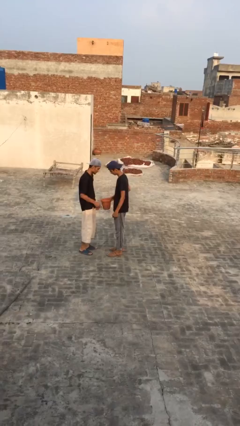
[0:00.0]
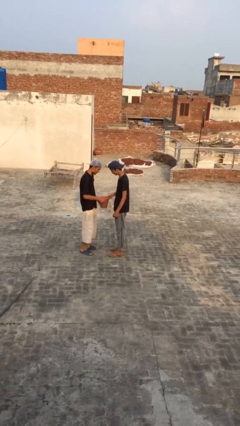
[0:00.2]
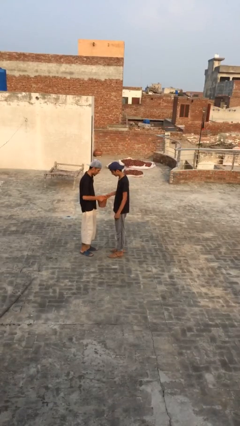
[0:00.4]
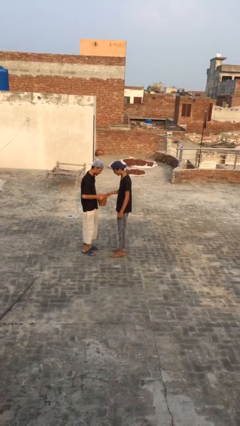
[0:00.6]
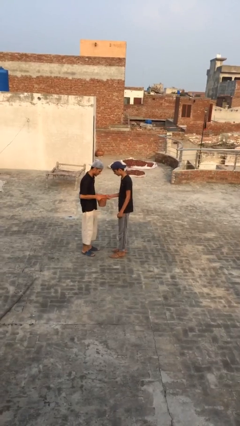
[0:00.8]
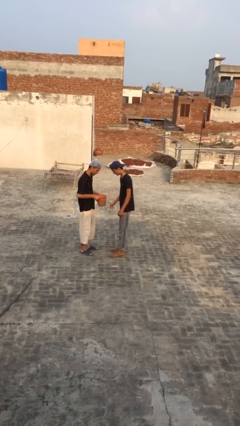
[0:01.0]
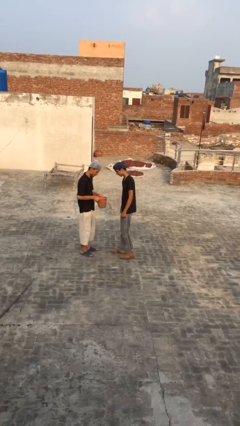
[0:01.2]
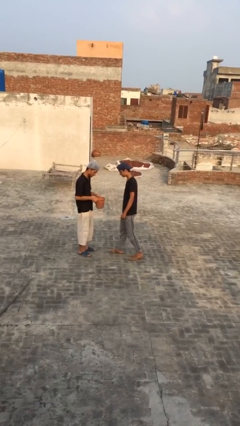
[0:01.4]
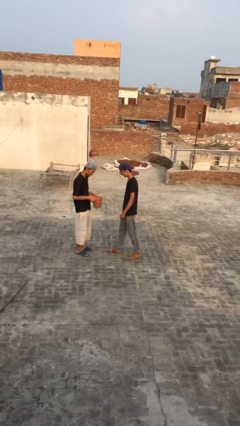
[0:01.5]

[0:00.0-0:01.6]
person transfers object to person

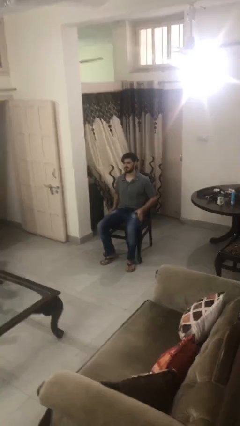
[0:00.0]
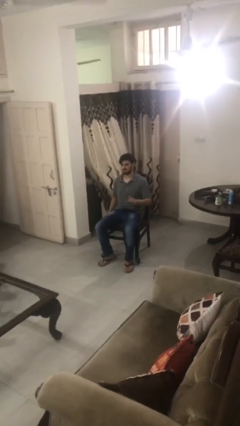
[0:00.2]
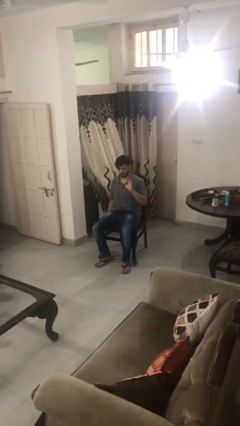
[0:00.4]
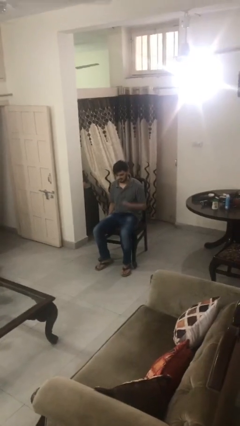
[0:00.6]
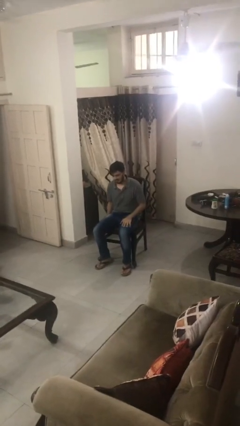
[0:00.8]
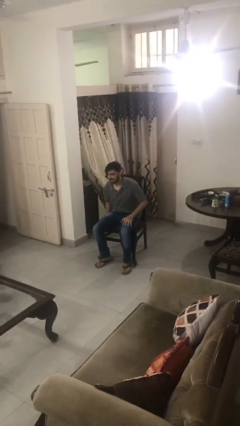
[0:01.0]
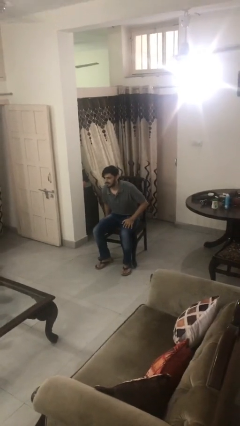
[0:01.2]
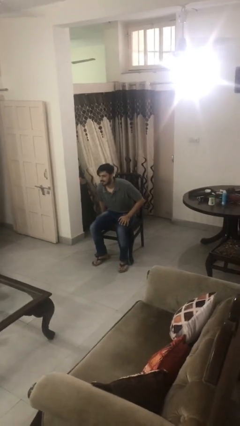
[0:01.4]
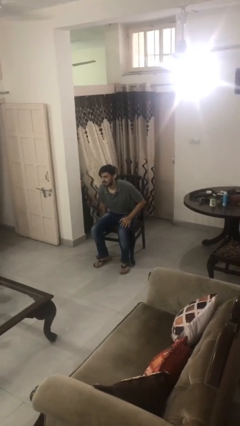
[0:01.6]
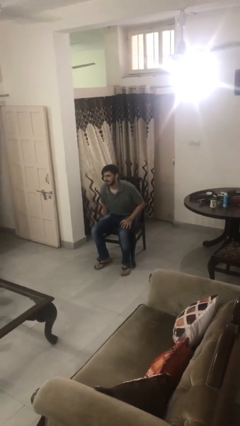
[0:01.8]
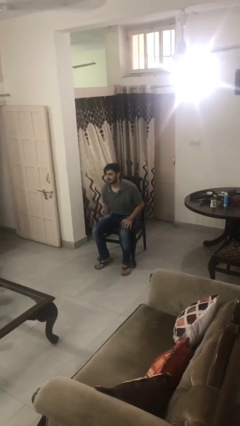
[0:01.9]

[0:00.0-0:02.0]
person slaps hands on thighs

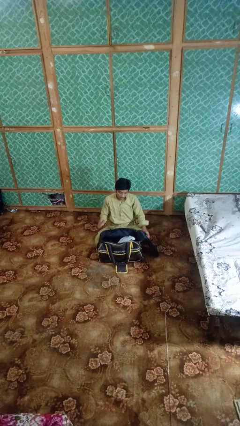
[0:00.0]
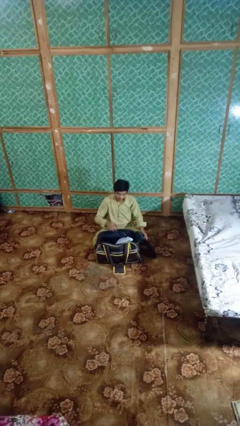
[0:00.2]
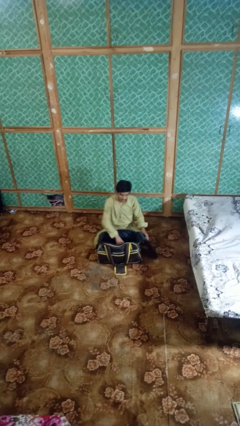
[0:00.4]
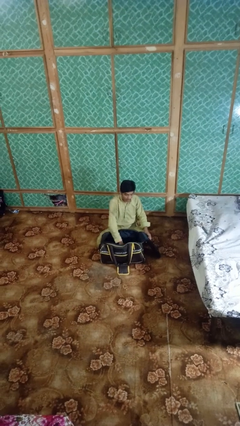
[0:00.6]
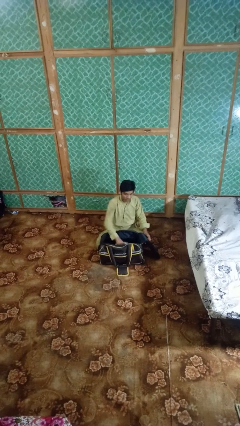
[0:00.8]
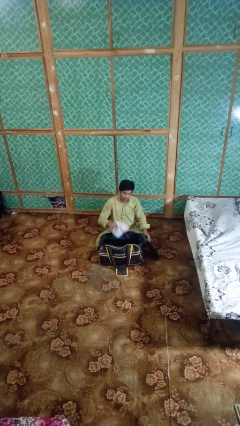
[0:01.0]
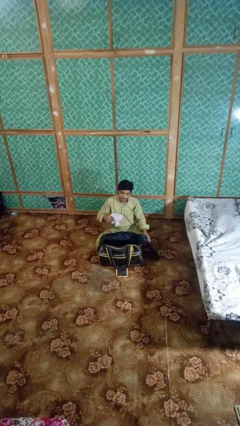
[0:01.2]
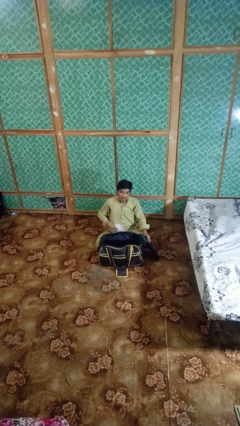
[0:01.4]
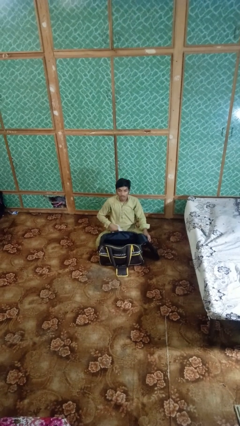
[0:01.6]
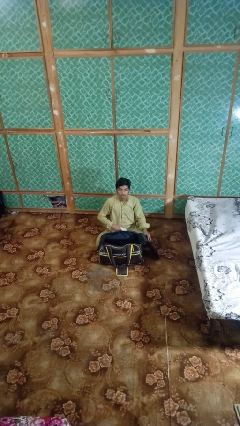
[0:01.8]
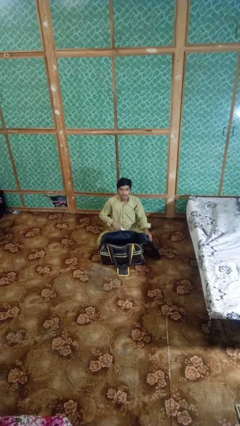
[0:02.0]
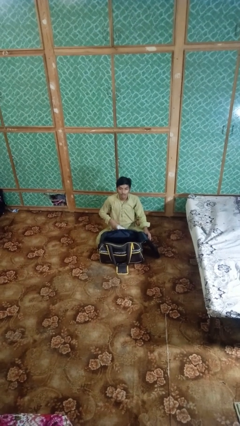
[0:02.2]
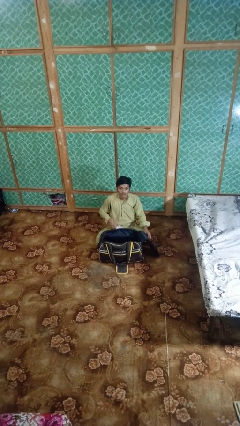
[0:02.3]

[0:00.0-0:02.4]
person takes object from bag

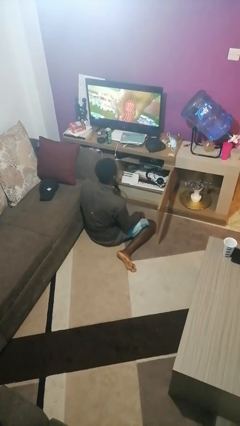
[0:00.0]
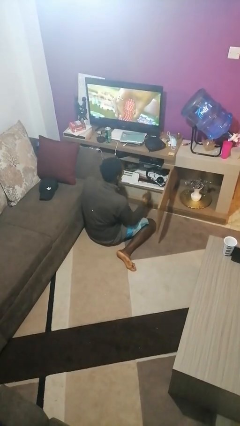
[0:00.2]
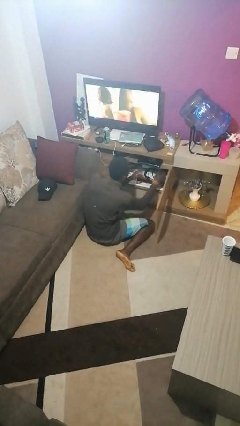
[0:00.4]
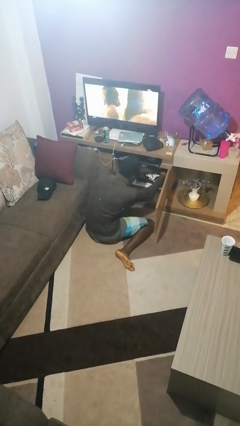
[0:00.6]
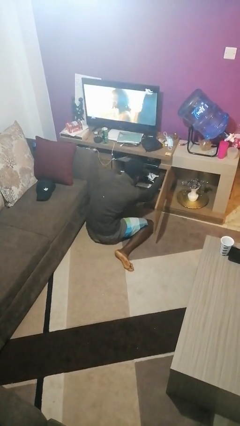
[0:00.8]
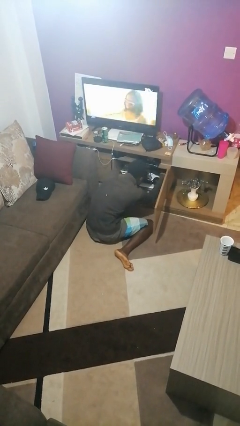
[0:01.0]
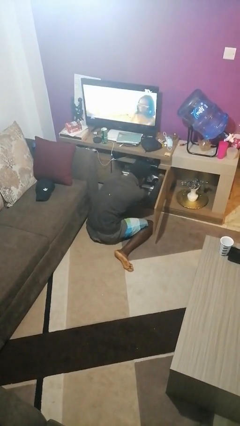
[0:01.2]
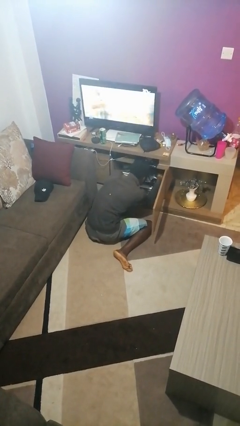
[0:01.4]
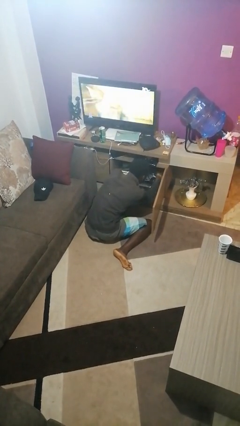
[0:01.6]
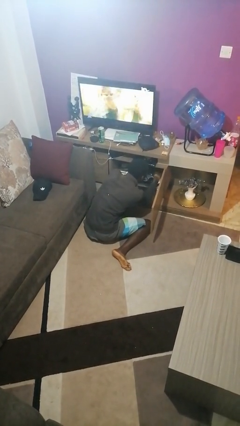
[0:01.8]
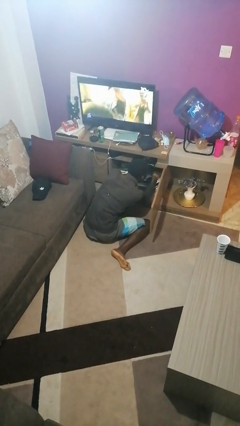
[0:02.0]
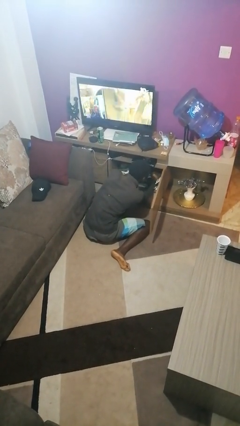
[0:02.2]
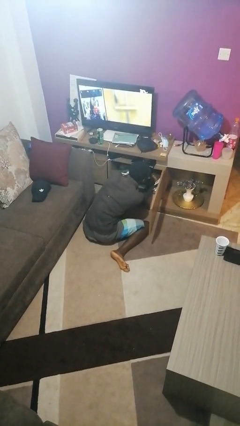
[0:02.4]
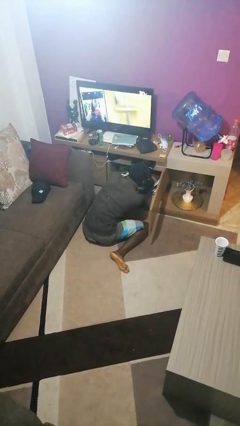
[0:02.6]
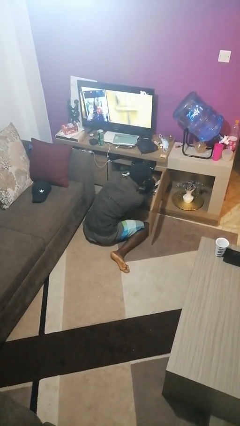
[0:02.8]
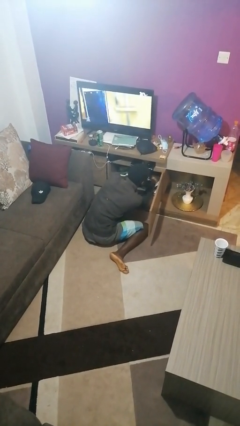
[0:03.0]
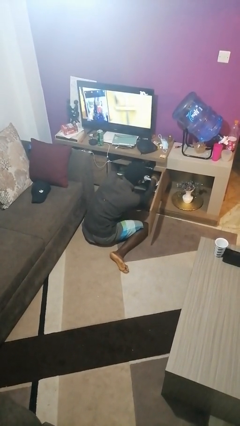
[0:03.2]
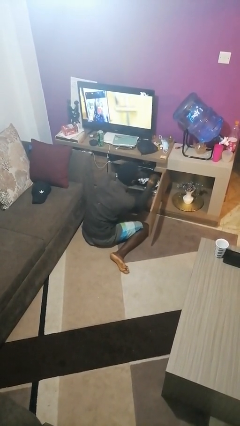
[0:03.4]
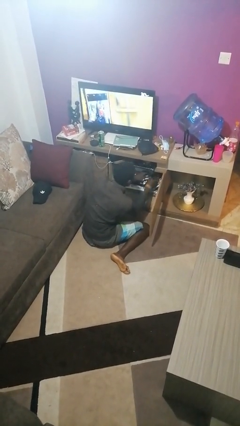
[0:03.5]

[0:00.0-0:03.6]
person searches in cabinet

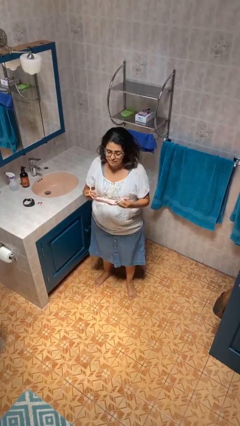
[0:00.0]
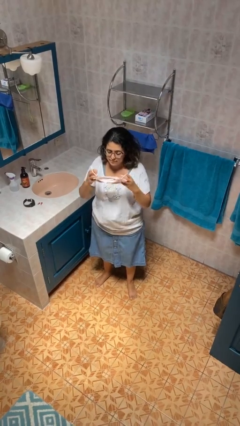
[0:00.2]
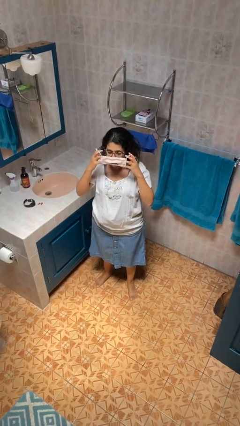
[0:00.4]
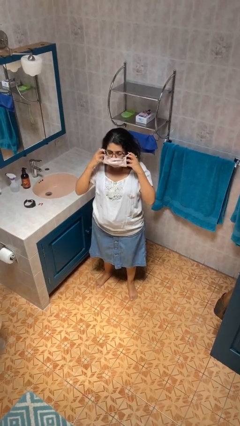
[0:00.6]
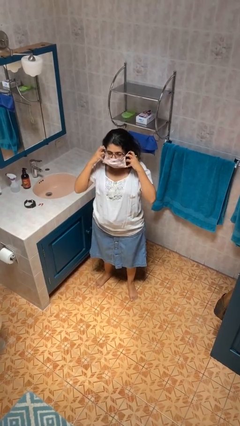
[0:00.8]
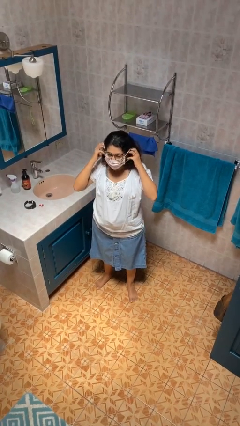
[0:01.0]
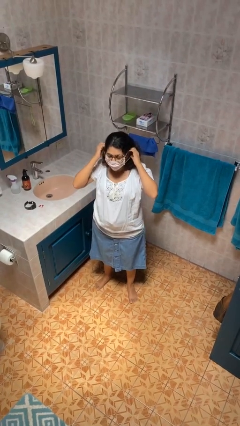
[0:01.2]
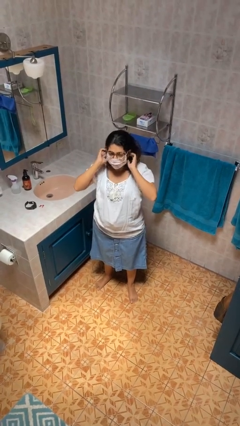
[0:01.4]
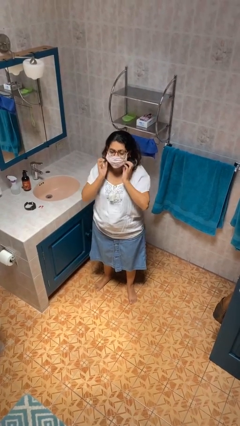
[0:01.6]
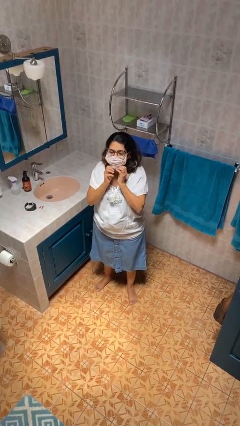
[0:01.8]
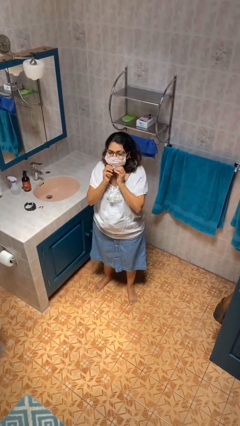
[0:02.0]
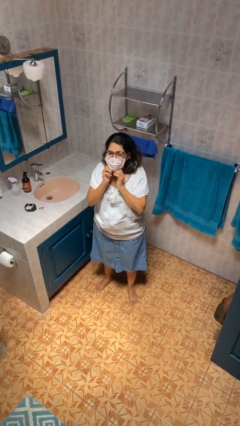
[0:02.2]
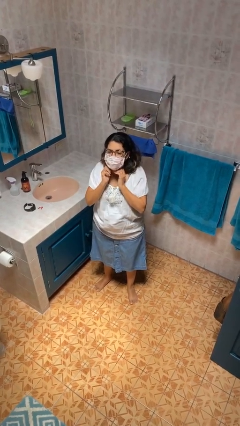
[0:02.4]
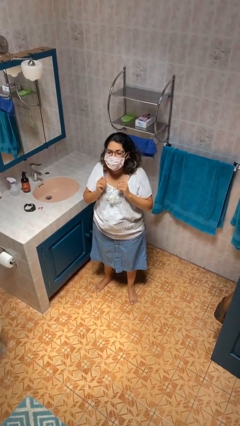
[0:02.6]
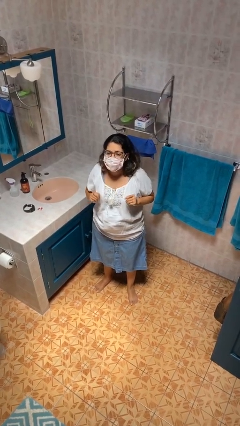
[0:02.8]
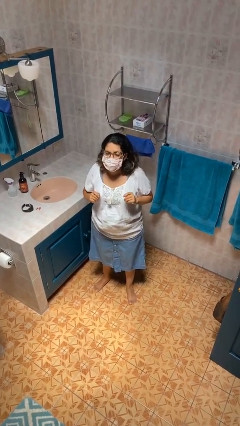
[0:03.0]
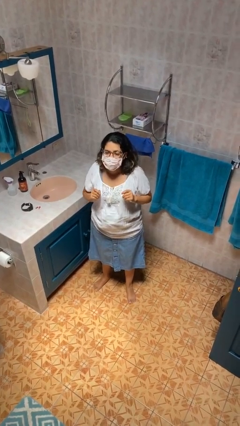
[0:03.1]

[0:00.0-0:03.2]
person puts on facemask

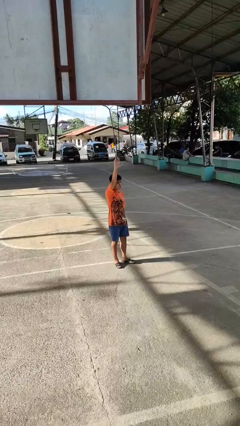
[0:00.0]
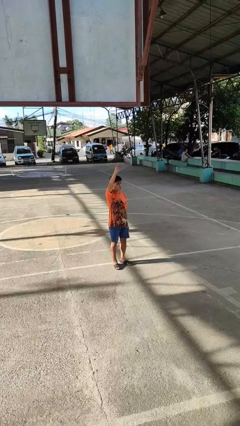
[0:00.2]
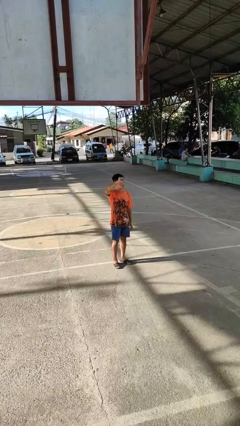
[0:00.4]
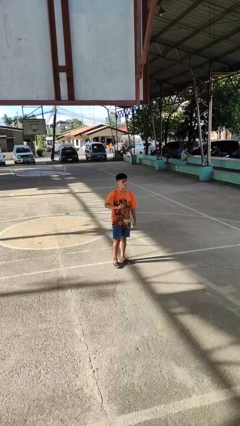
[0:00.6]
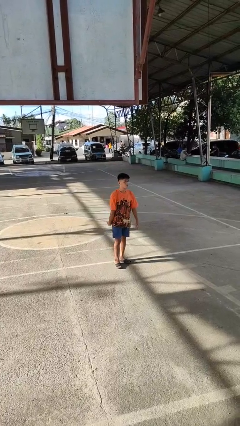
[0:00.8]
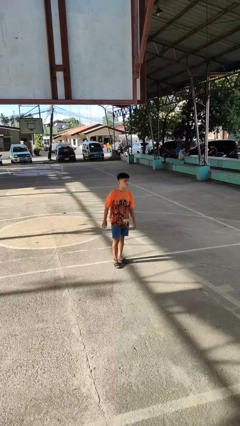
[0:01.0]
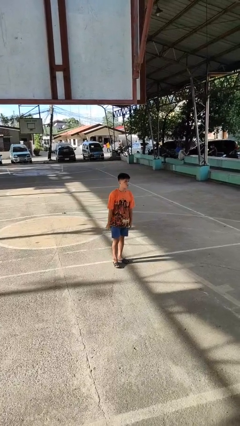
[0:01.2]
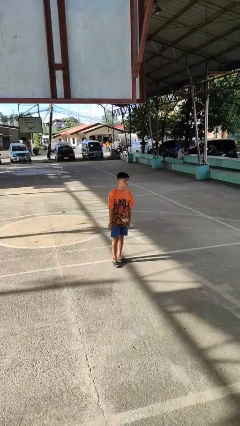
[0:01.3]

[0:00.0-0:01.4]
person gestures lower hand

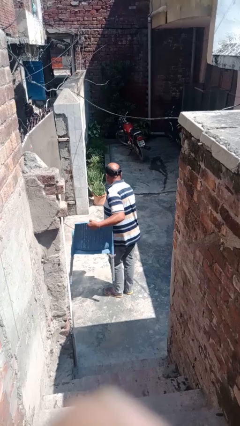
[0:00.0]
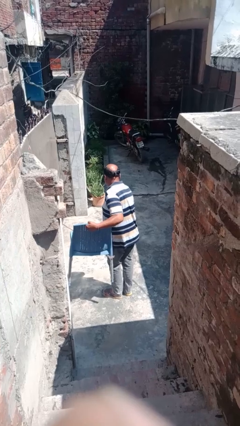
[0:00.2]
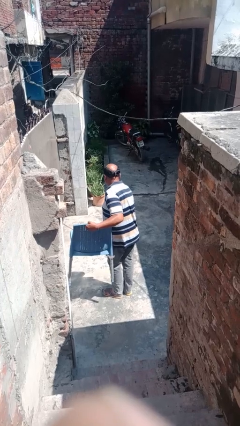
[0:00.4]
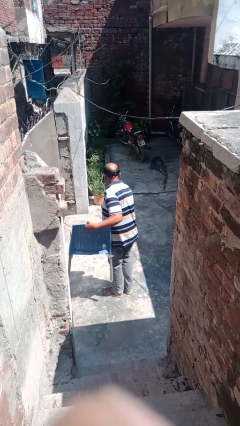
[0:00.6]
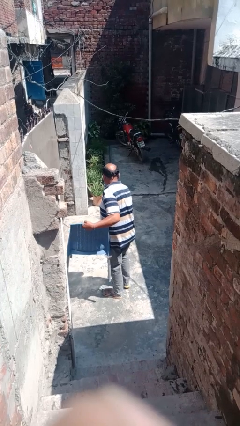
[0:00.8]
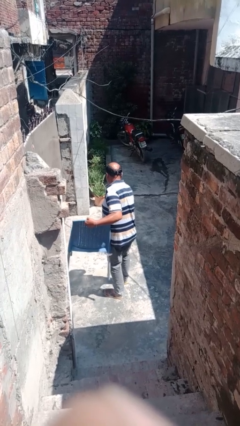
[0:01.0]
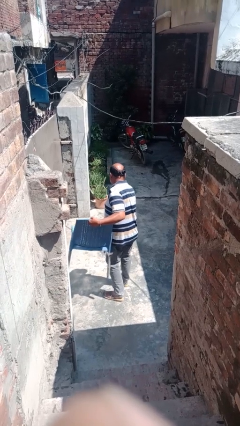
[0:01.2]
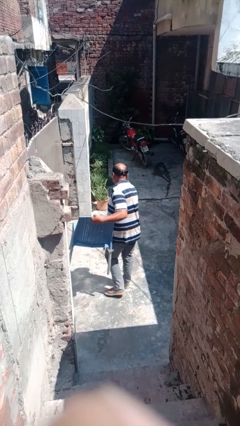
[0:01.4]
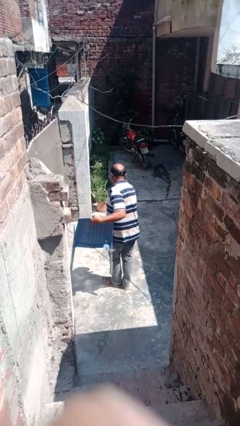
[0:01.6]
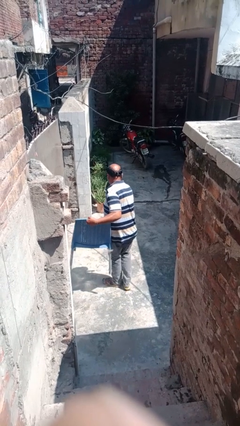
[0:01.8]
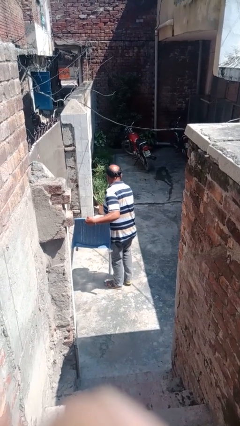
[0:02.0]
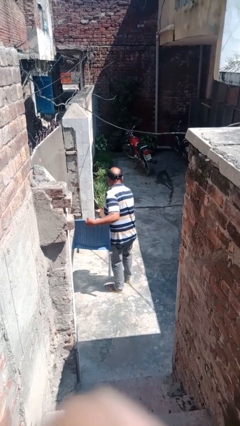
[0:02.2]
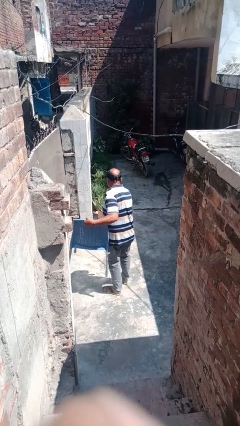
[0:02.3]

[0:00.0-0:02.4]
person carries furniture

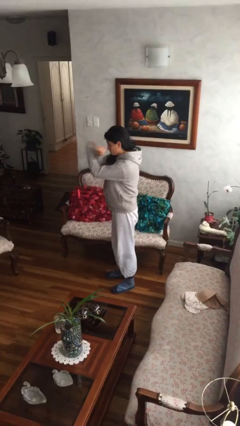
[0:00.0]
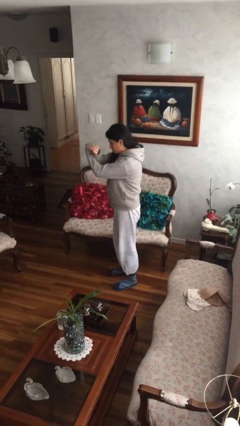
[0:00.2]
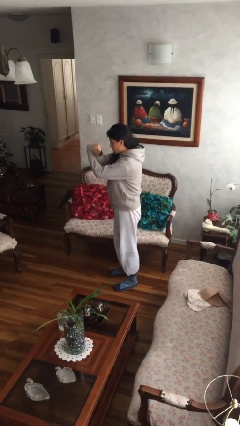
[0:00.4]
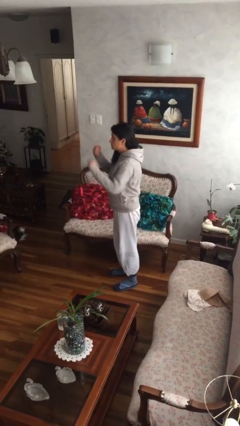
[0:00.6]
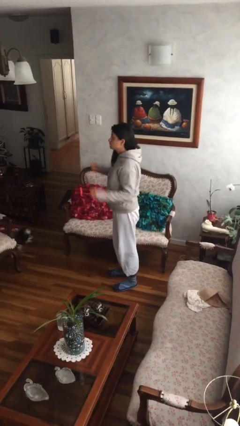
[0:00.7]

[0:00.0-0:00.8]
person gestures arms x
